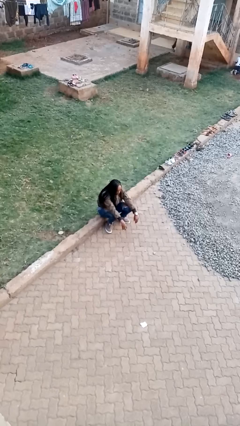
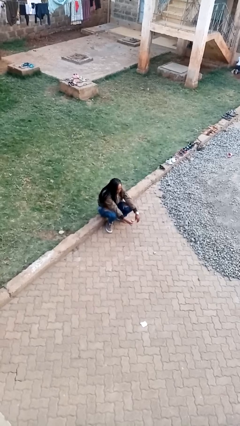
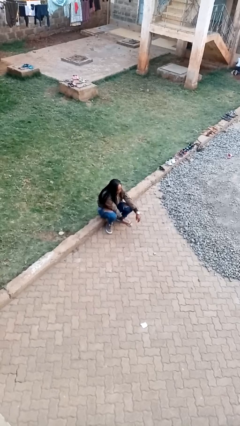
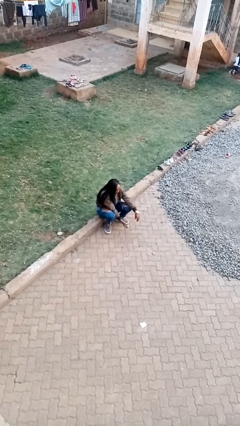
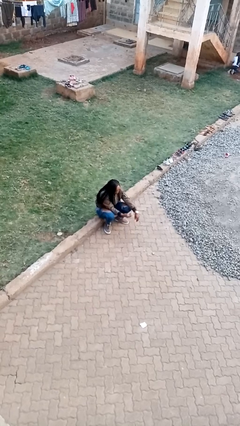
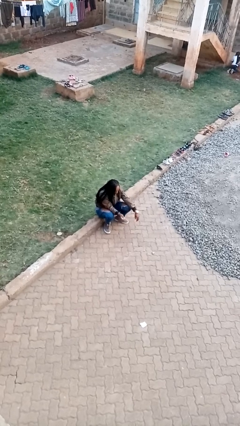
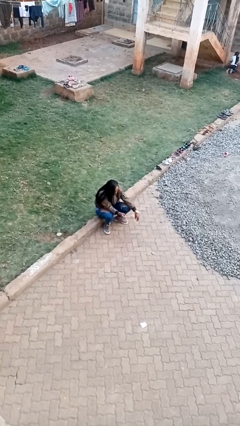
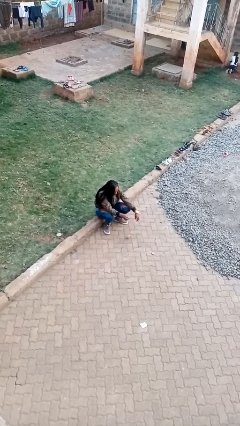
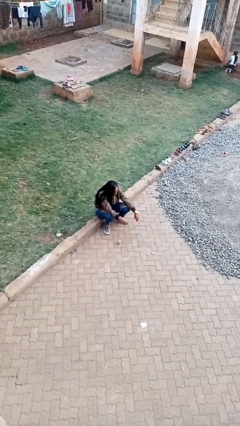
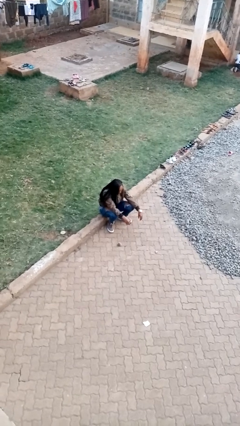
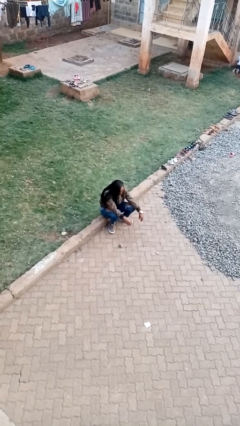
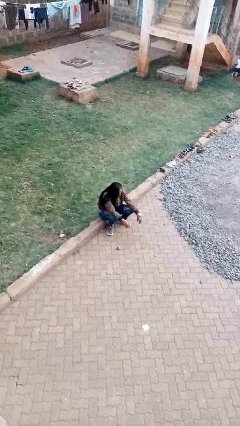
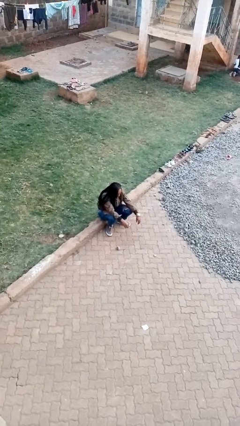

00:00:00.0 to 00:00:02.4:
person throws object into air

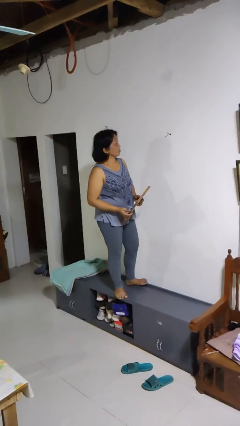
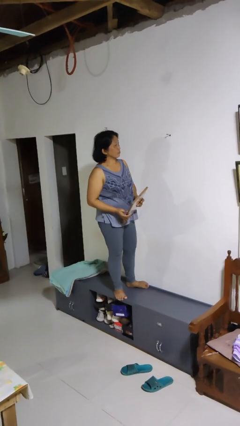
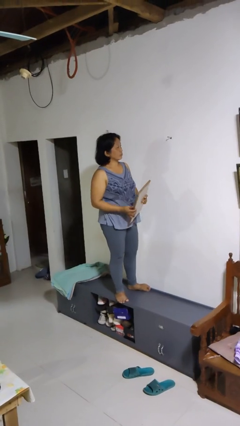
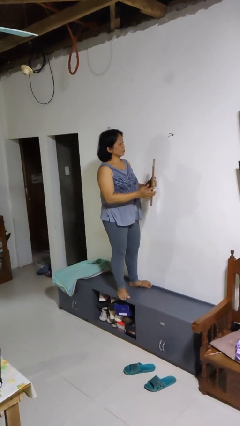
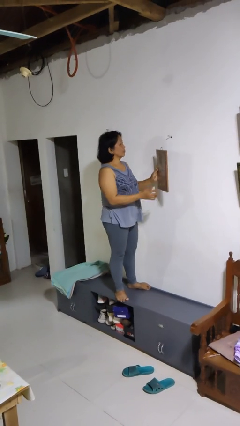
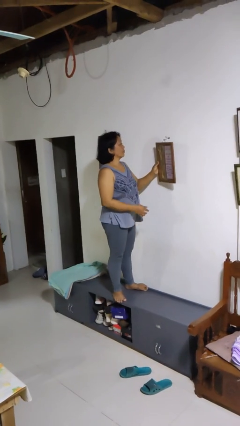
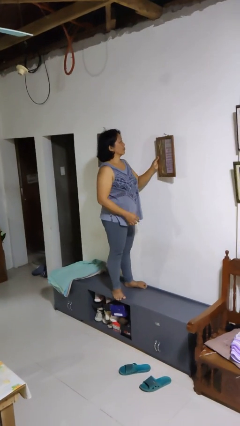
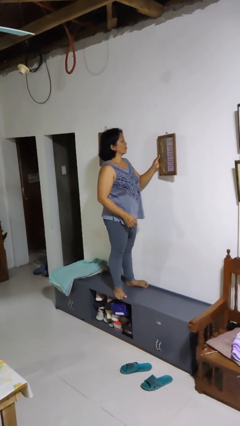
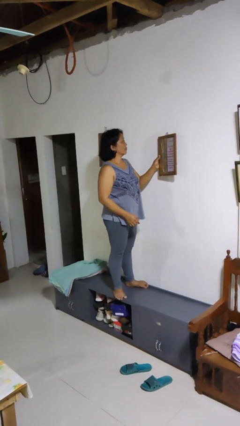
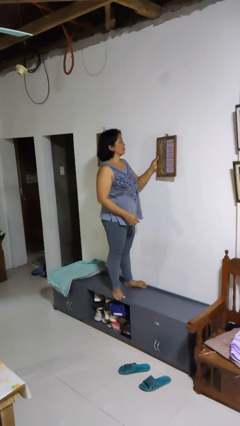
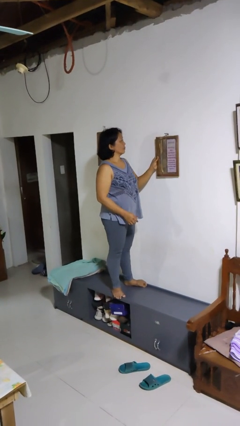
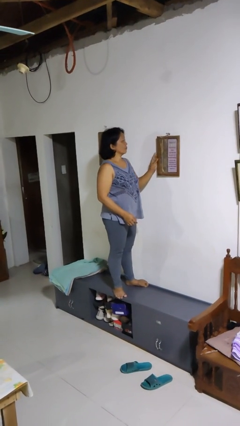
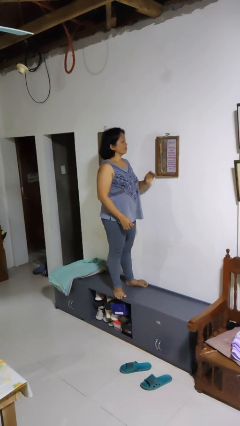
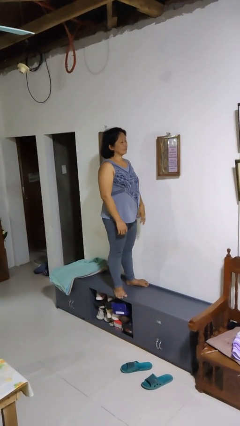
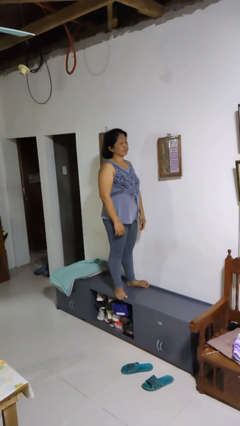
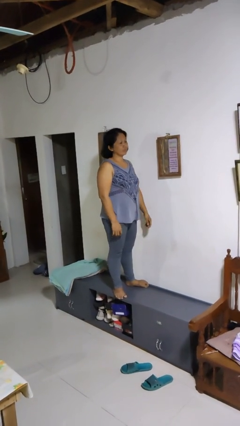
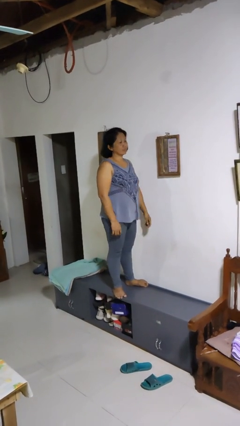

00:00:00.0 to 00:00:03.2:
person puts up picture frame

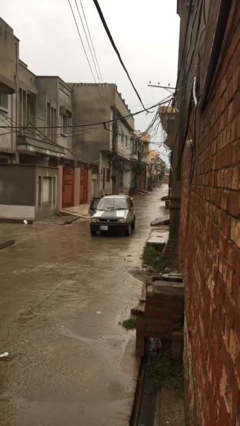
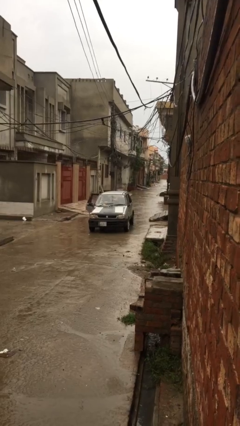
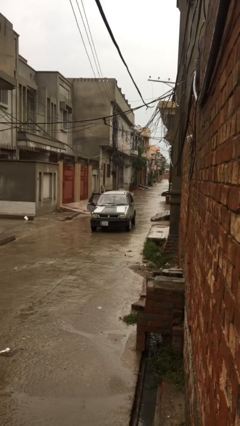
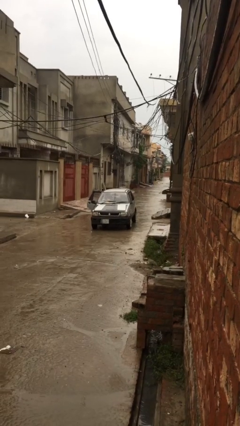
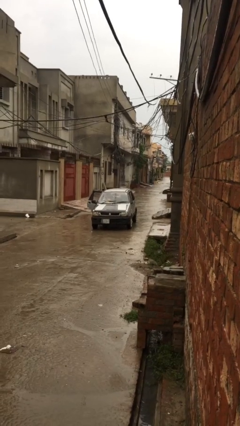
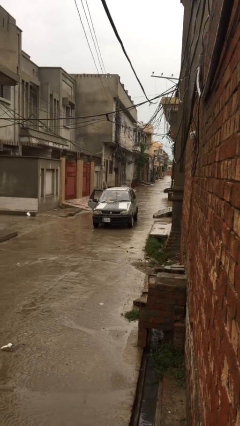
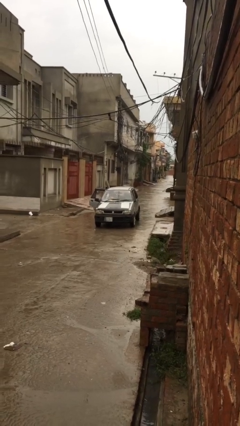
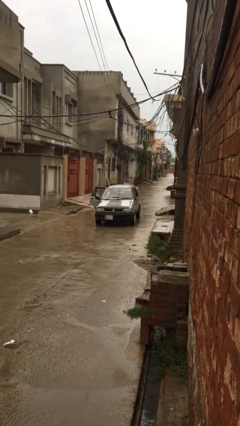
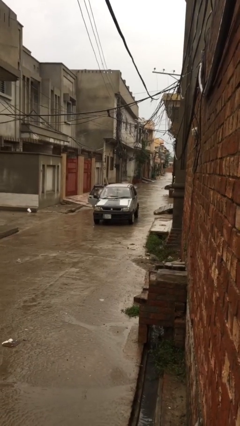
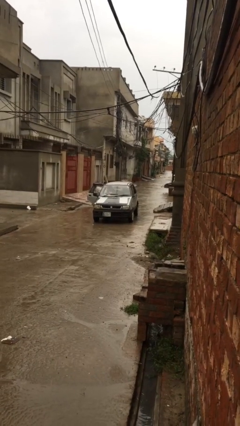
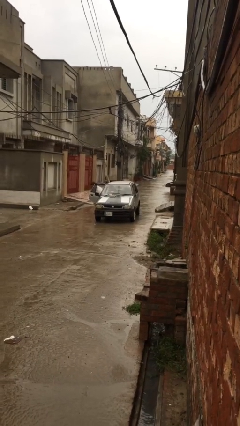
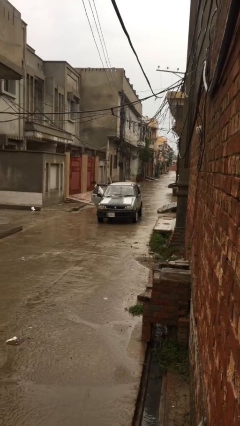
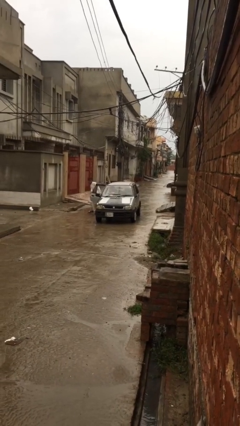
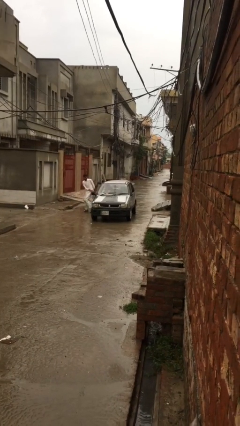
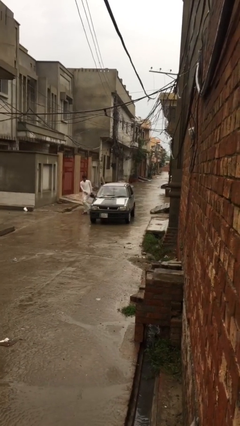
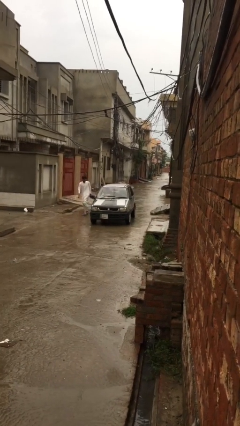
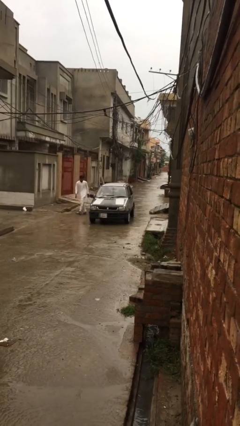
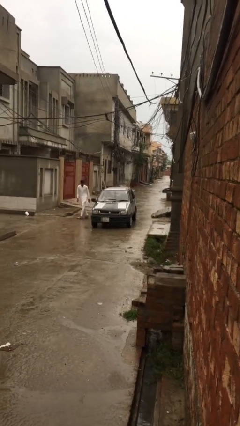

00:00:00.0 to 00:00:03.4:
car drops off person

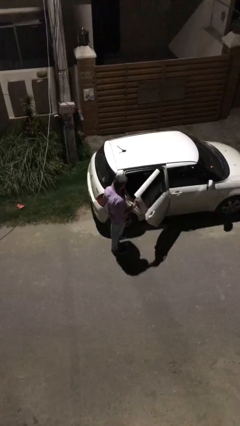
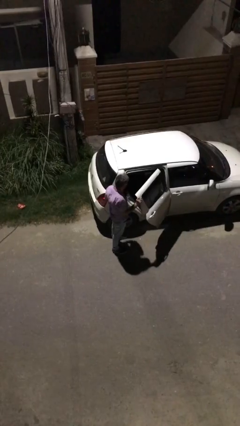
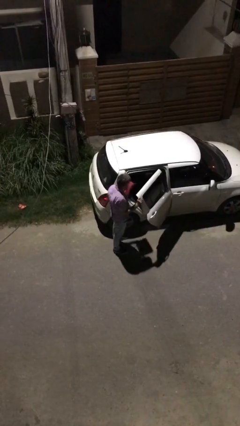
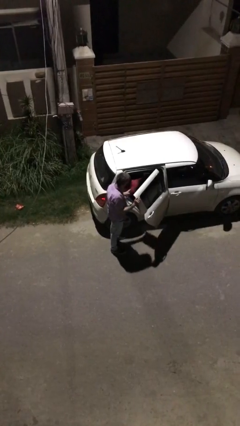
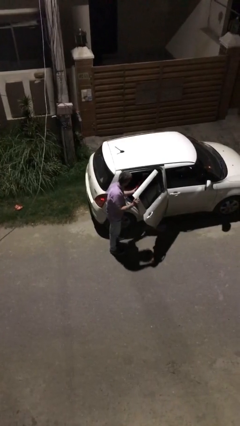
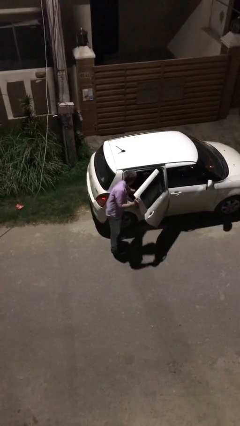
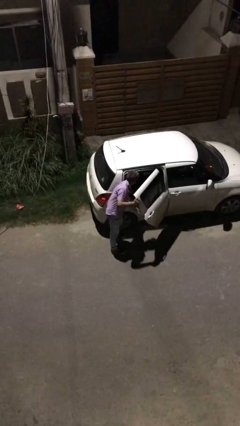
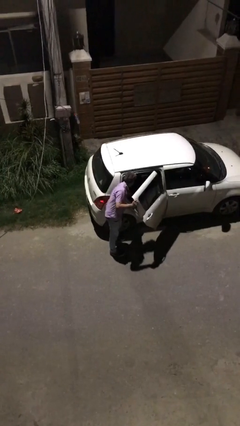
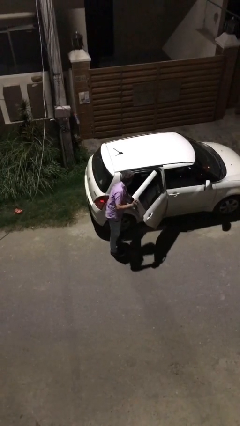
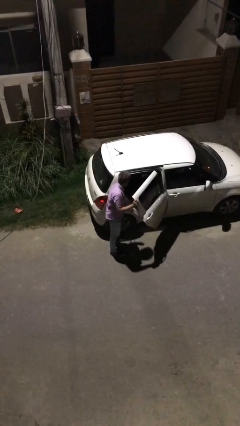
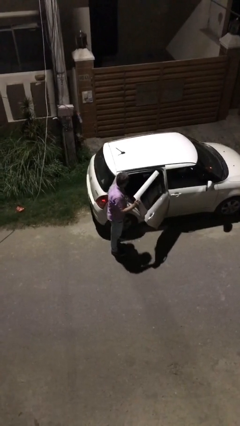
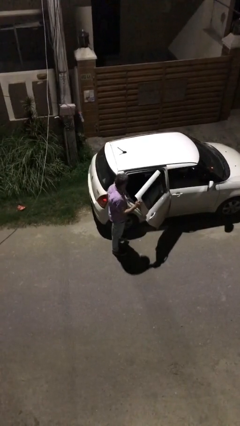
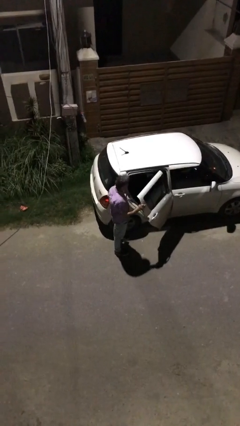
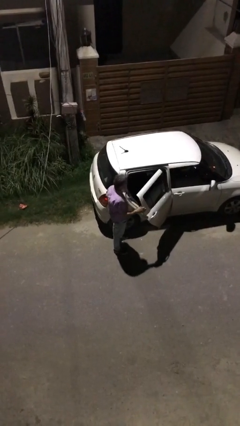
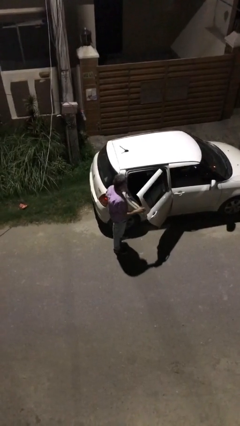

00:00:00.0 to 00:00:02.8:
person loads car

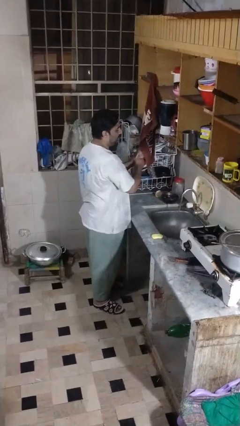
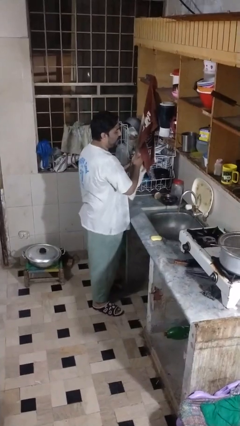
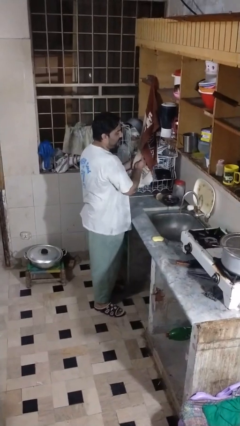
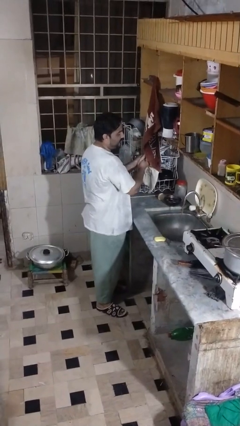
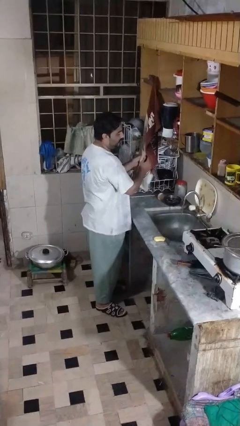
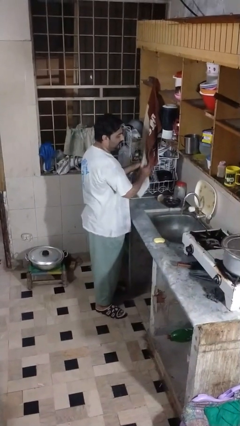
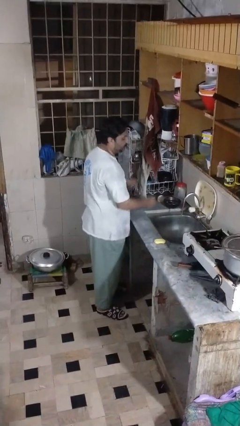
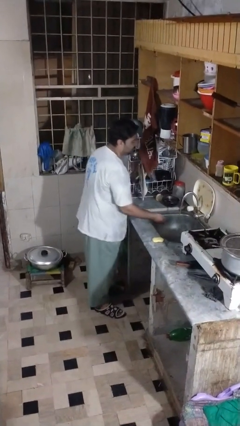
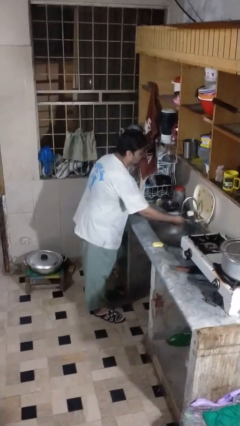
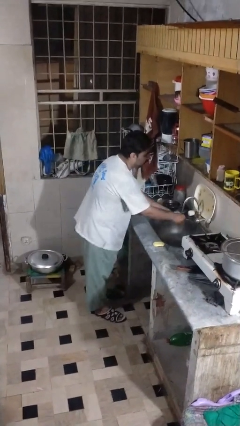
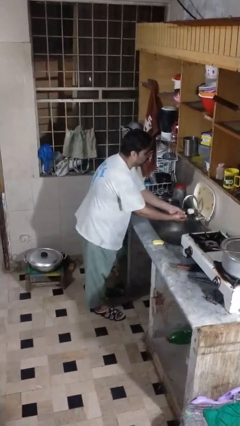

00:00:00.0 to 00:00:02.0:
person washes hands

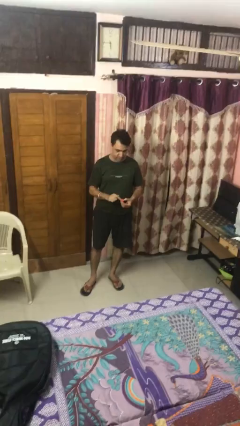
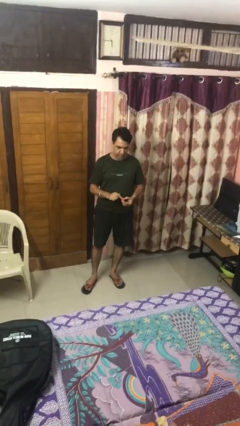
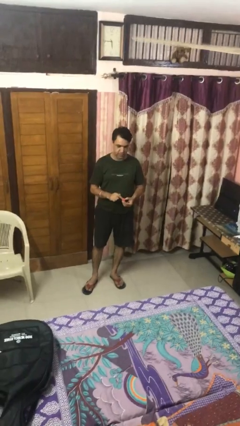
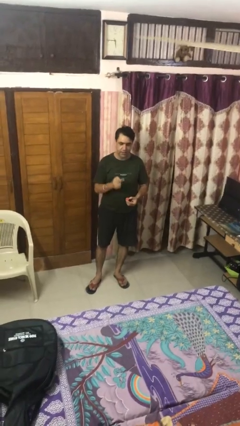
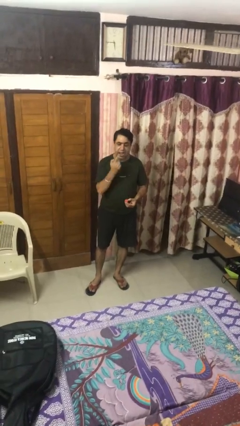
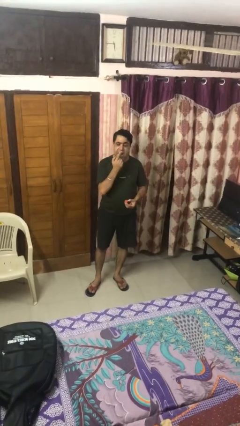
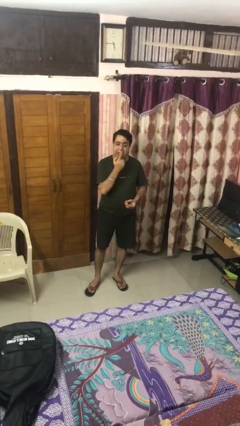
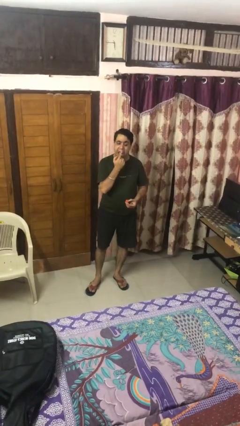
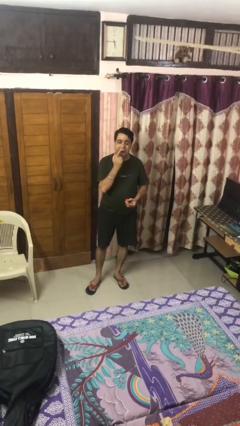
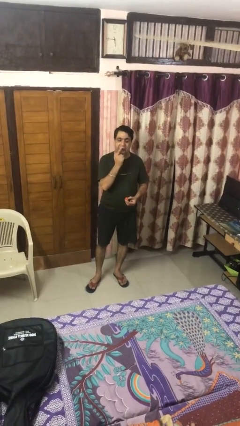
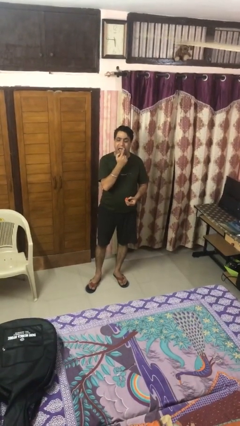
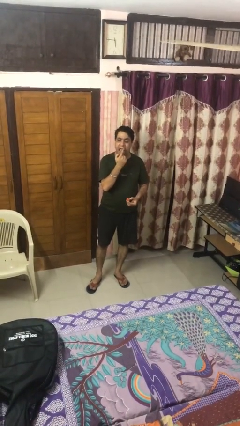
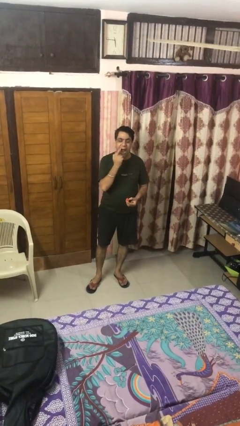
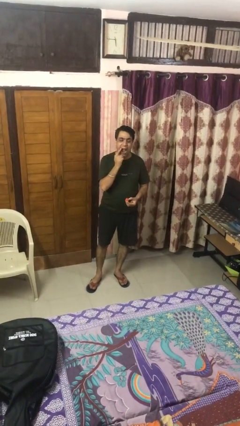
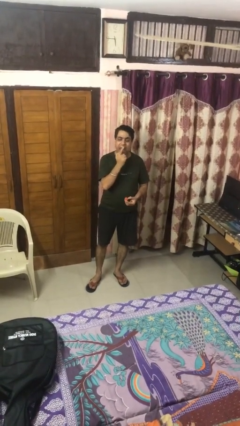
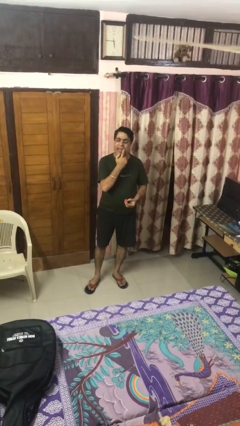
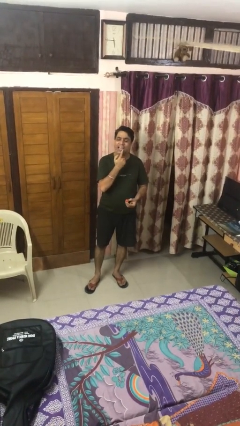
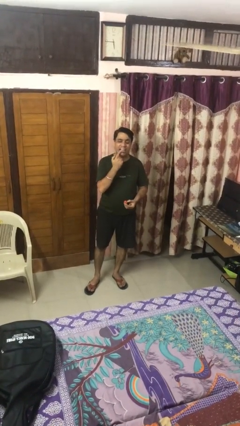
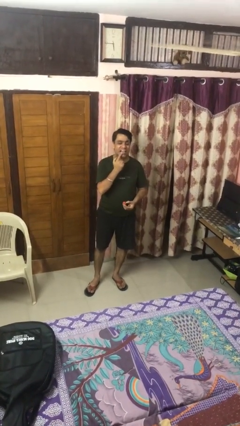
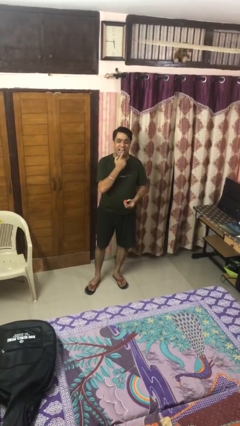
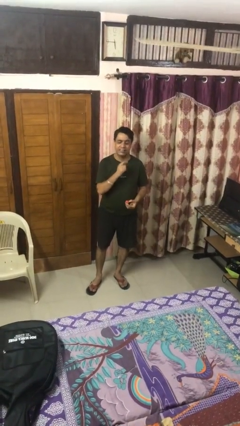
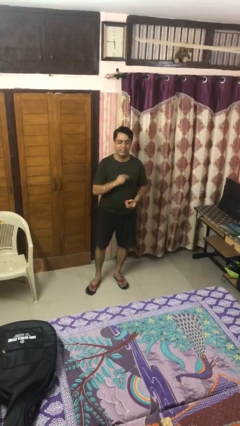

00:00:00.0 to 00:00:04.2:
person applies lip makeup
